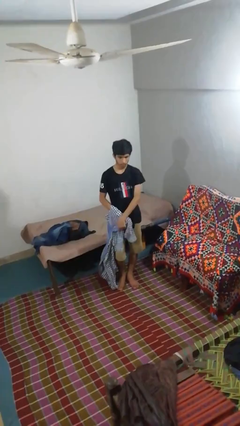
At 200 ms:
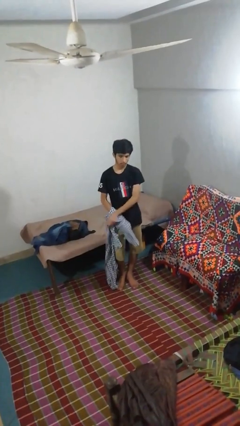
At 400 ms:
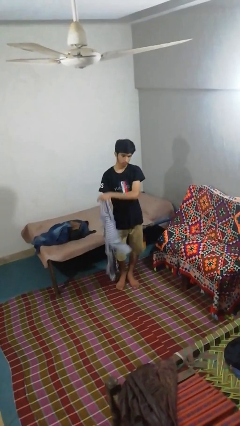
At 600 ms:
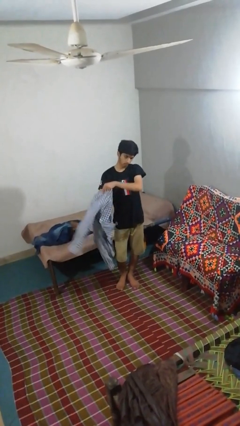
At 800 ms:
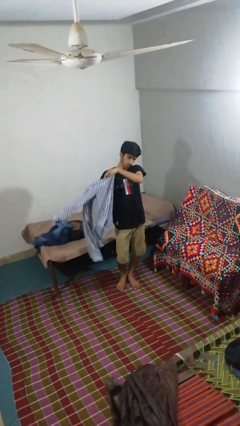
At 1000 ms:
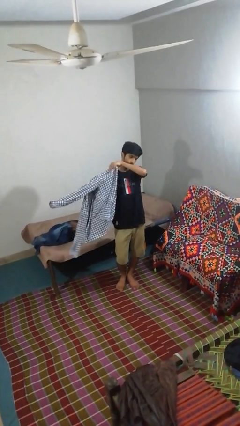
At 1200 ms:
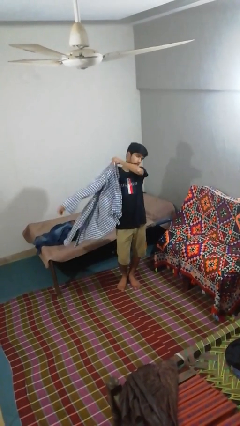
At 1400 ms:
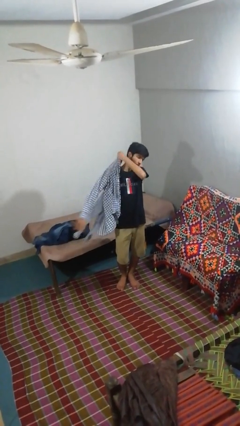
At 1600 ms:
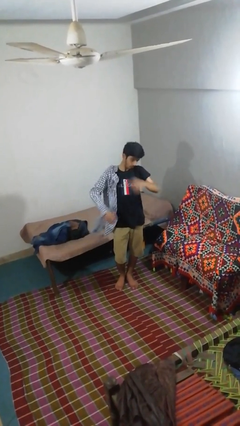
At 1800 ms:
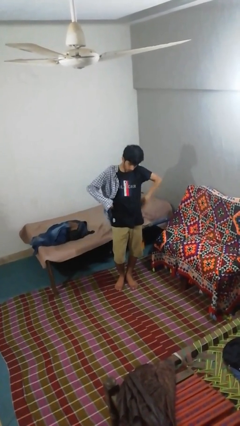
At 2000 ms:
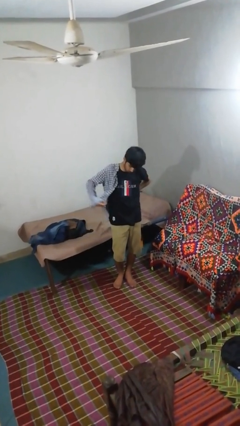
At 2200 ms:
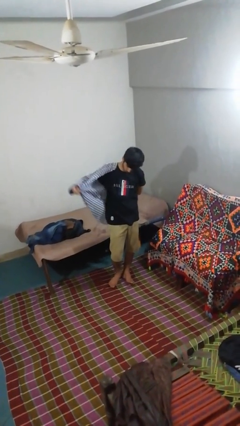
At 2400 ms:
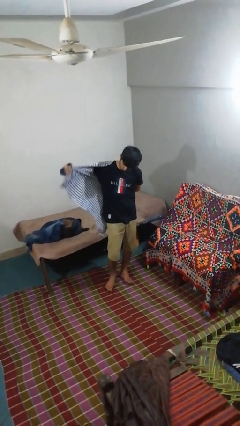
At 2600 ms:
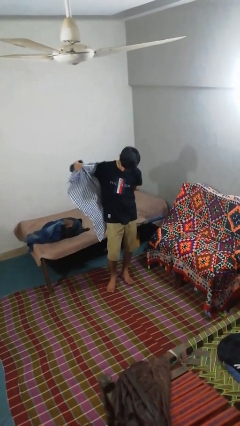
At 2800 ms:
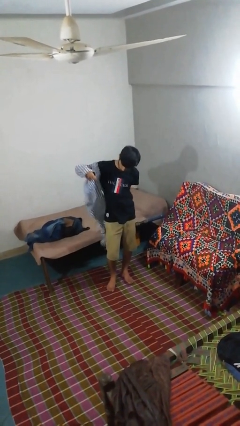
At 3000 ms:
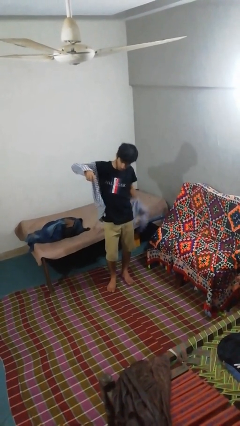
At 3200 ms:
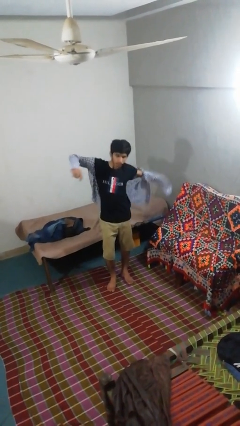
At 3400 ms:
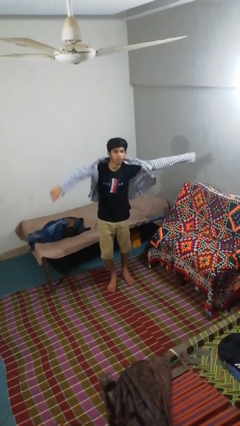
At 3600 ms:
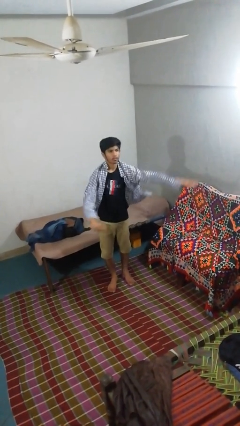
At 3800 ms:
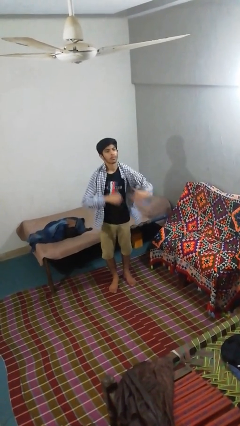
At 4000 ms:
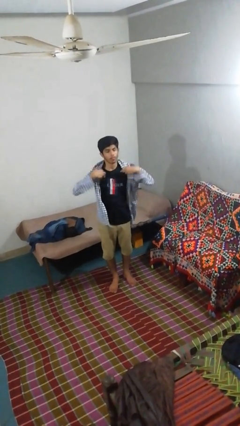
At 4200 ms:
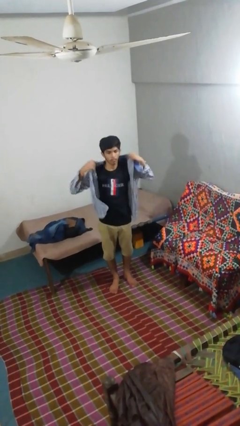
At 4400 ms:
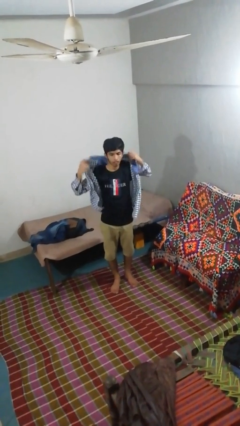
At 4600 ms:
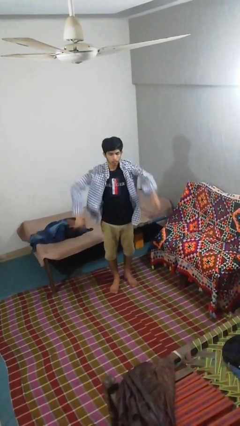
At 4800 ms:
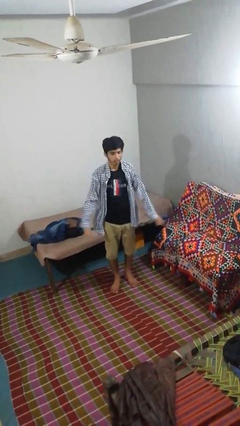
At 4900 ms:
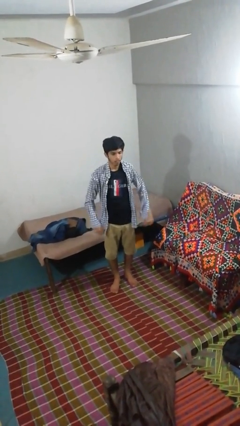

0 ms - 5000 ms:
person puts on shirt

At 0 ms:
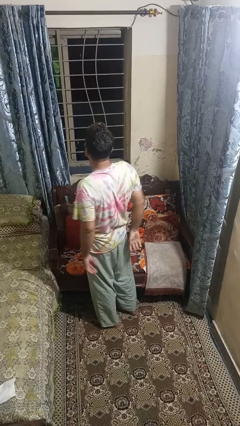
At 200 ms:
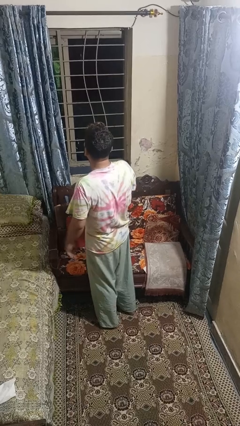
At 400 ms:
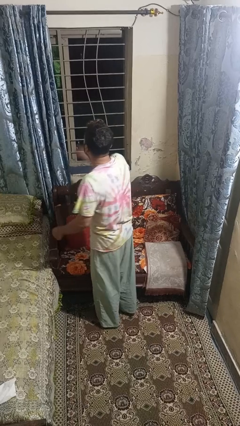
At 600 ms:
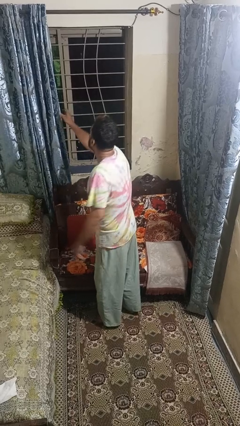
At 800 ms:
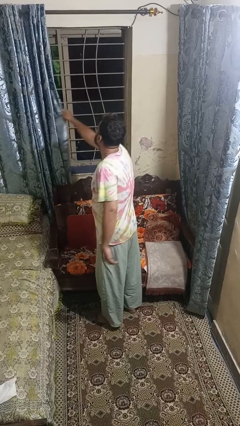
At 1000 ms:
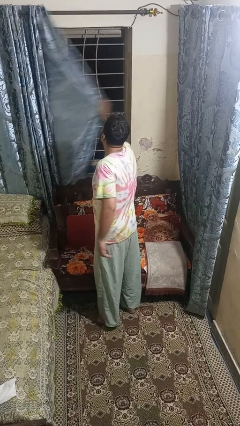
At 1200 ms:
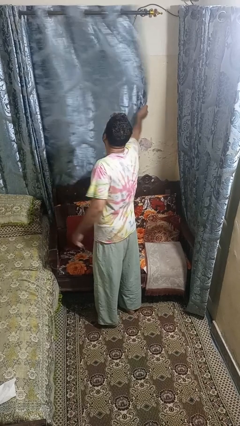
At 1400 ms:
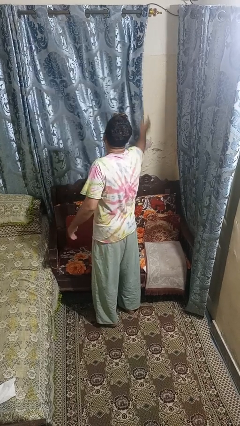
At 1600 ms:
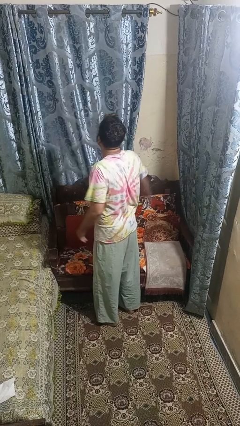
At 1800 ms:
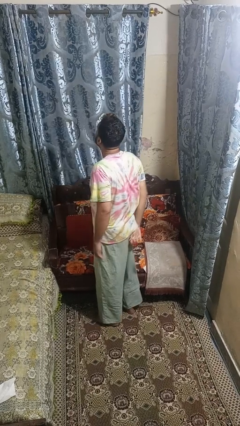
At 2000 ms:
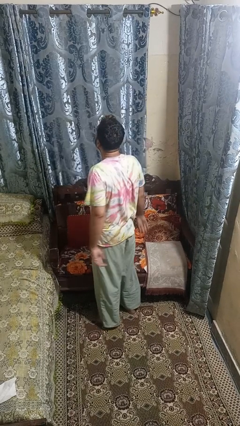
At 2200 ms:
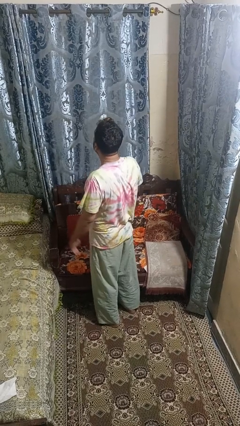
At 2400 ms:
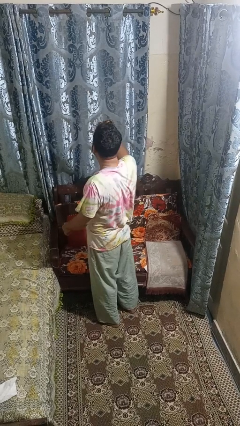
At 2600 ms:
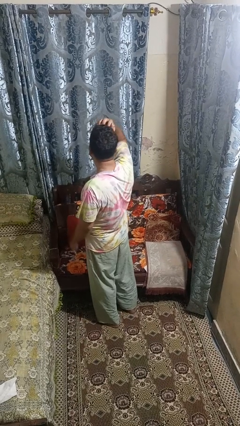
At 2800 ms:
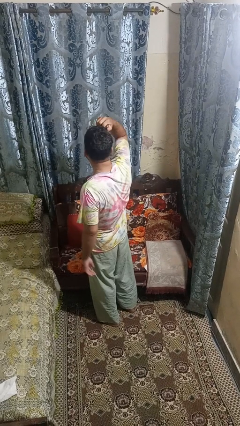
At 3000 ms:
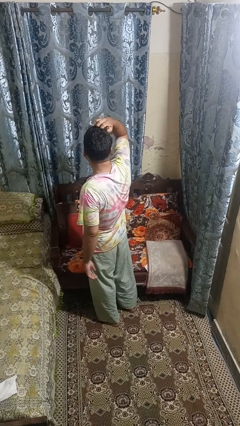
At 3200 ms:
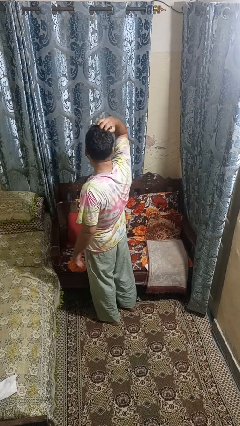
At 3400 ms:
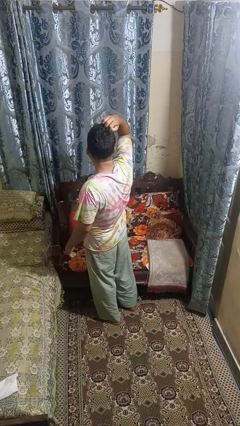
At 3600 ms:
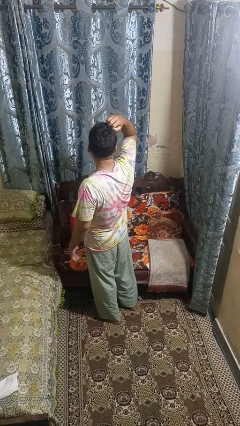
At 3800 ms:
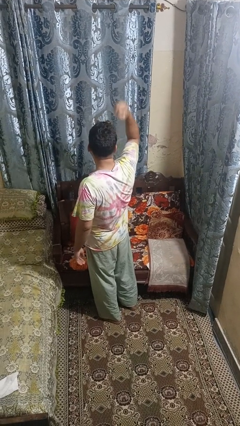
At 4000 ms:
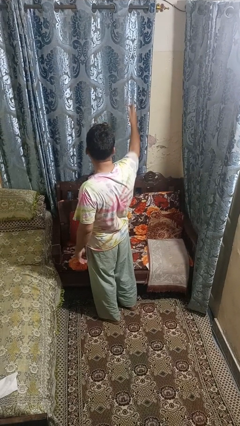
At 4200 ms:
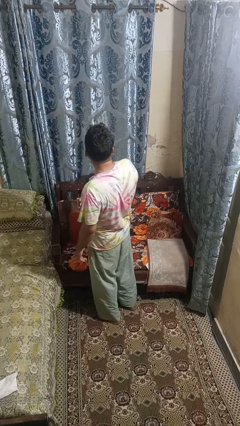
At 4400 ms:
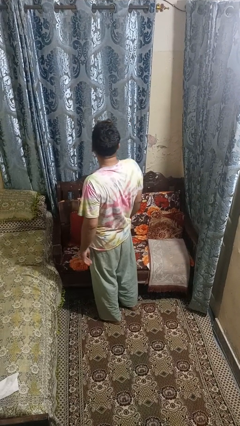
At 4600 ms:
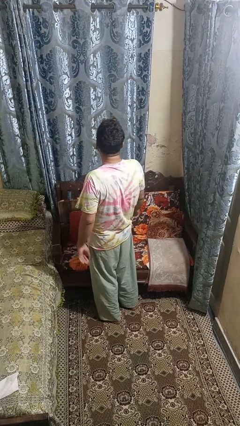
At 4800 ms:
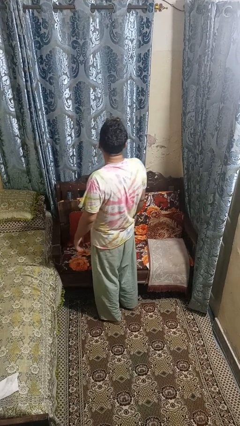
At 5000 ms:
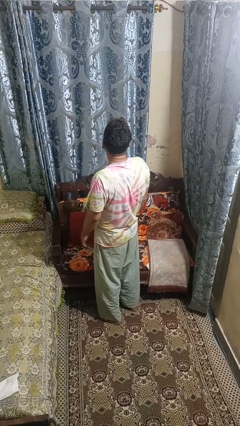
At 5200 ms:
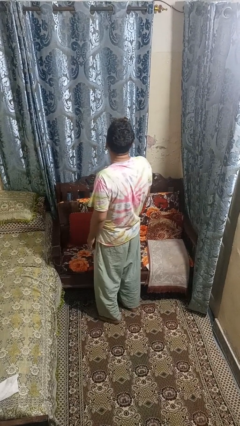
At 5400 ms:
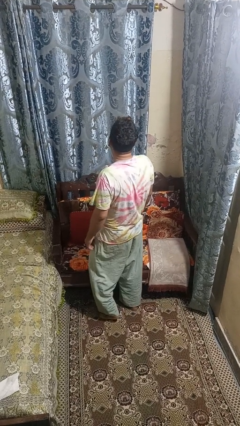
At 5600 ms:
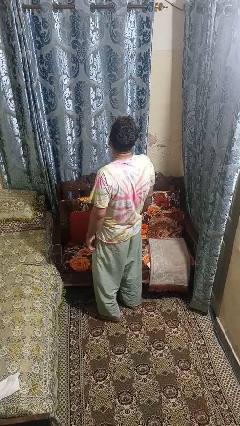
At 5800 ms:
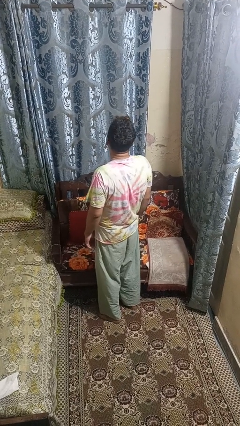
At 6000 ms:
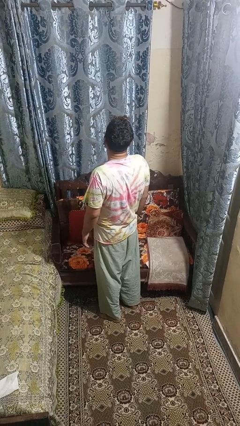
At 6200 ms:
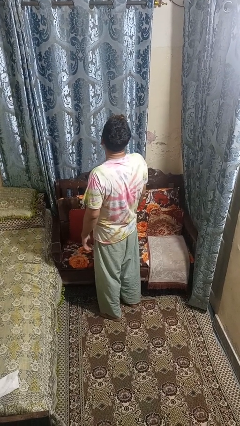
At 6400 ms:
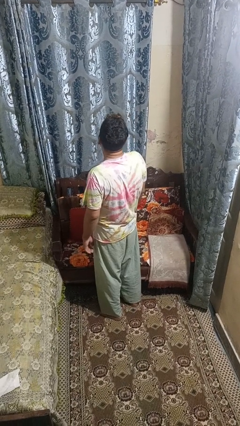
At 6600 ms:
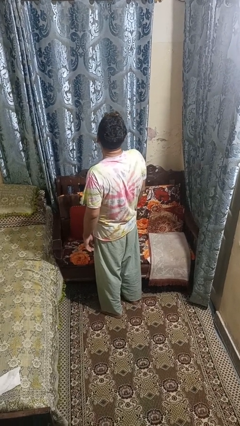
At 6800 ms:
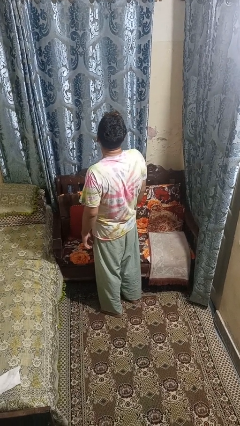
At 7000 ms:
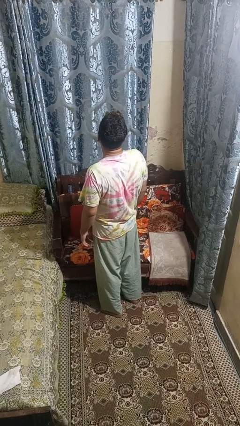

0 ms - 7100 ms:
person closes curtains

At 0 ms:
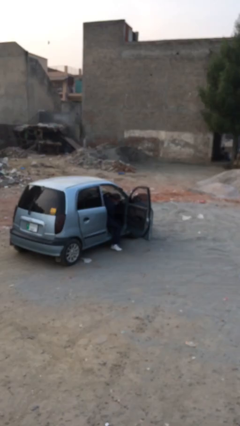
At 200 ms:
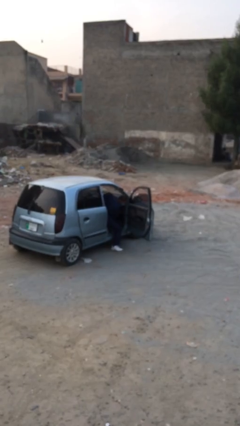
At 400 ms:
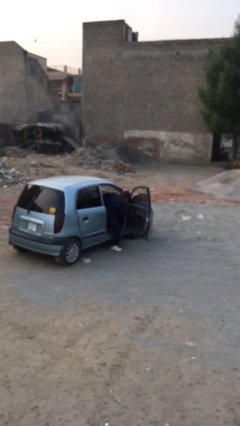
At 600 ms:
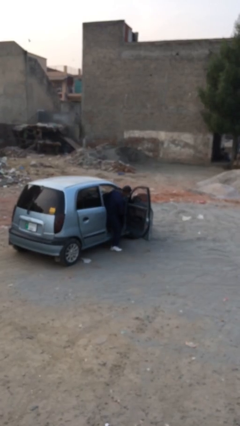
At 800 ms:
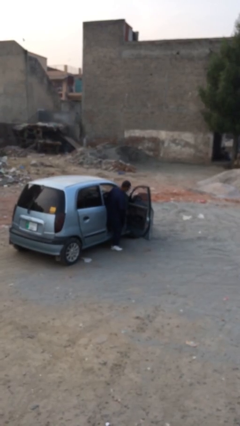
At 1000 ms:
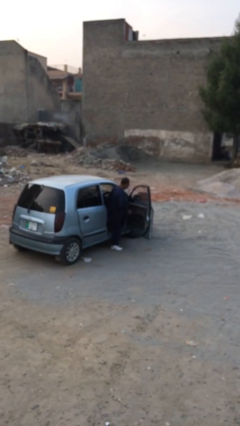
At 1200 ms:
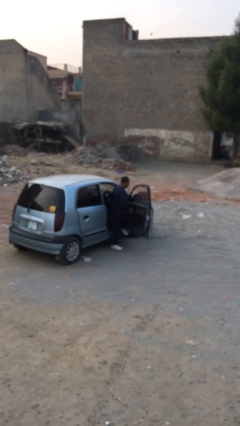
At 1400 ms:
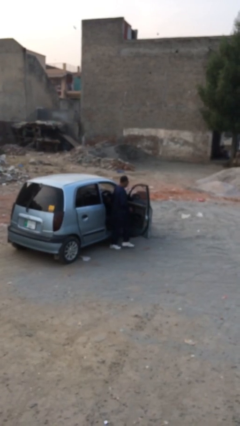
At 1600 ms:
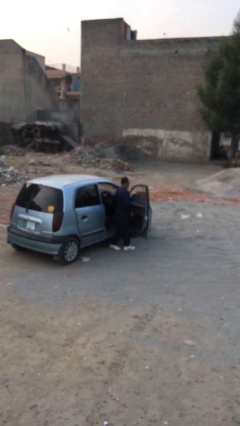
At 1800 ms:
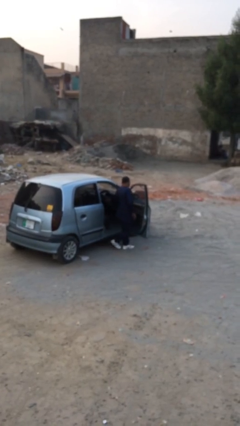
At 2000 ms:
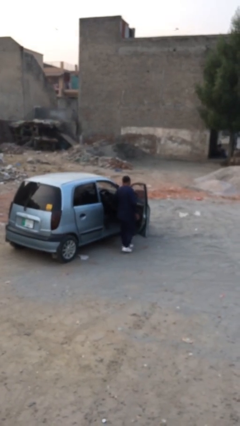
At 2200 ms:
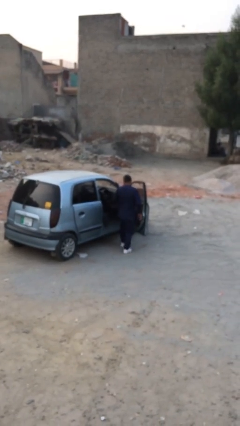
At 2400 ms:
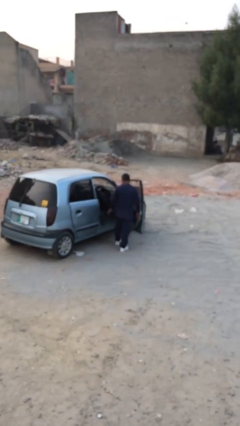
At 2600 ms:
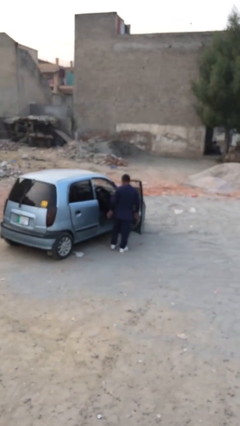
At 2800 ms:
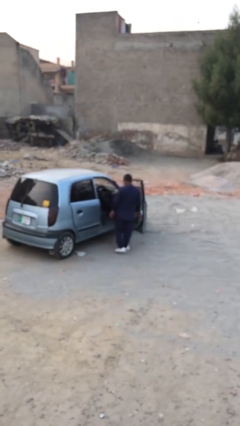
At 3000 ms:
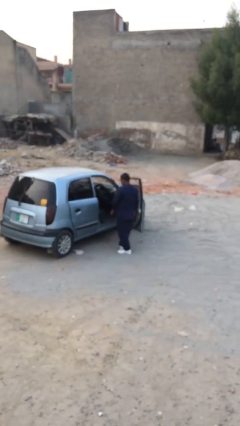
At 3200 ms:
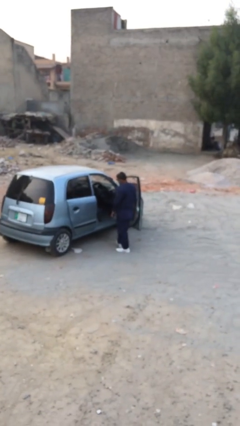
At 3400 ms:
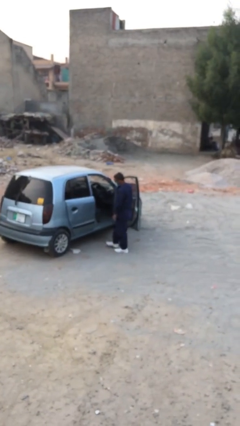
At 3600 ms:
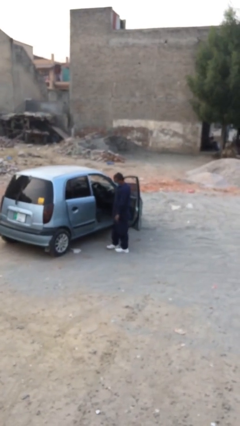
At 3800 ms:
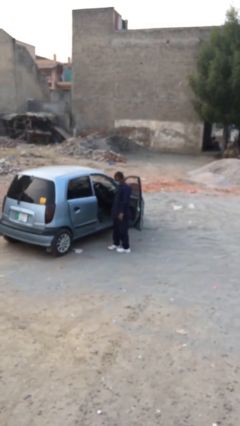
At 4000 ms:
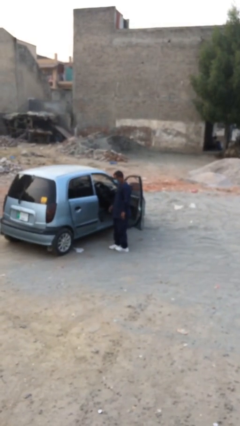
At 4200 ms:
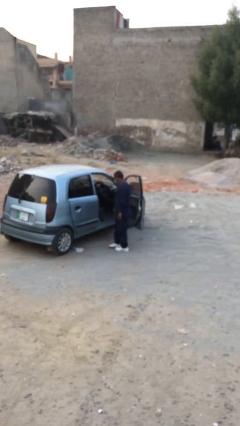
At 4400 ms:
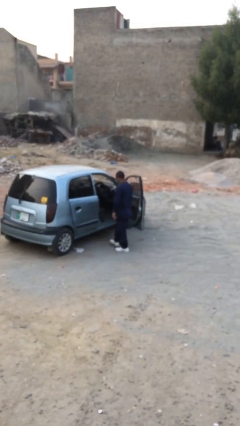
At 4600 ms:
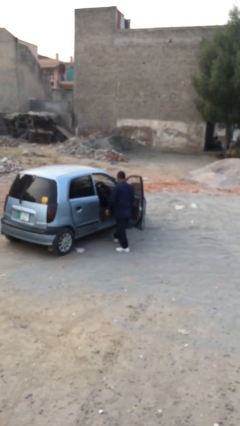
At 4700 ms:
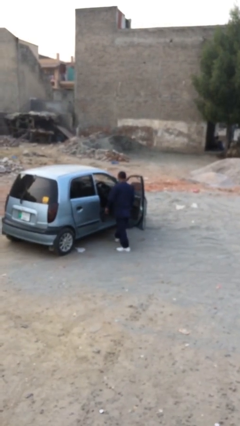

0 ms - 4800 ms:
person exits car

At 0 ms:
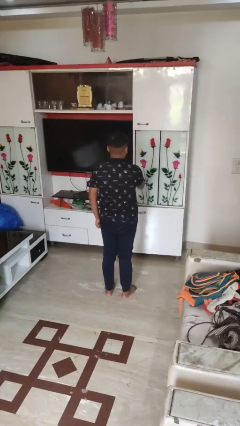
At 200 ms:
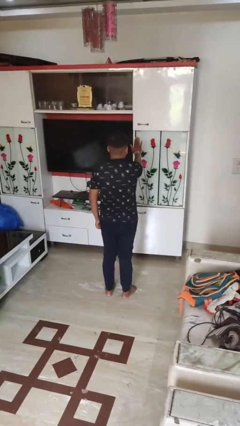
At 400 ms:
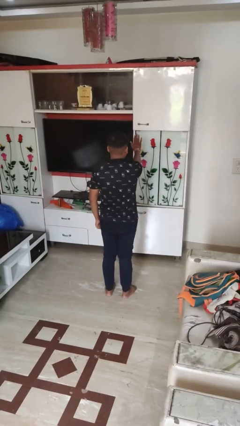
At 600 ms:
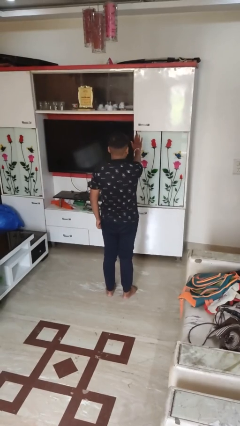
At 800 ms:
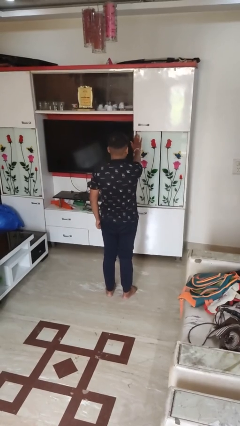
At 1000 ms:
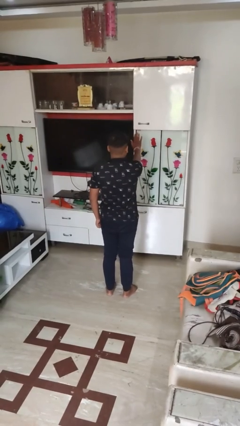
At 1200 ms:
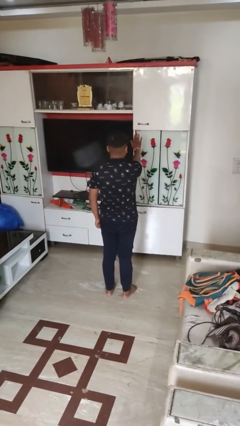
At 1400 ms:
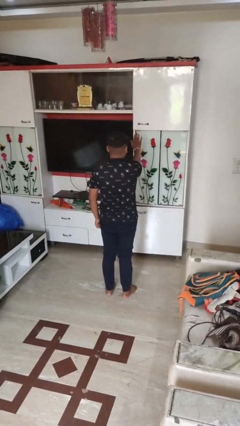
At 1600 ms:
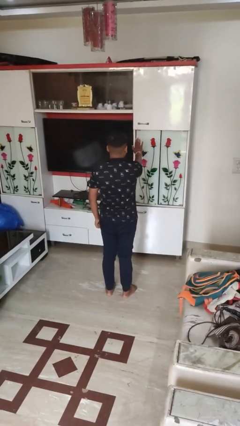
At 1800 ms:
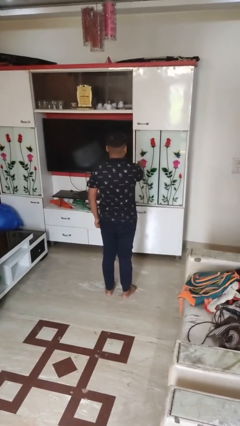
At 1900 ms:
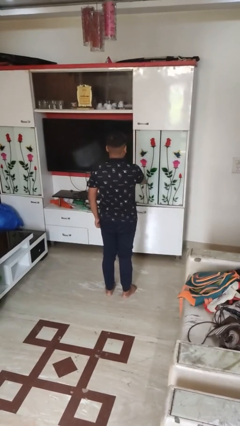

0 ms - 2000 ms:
person gestures stop
